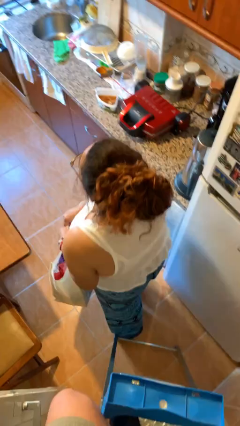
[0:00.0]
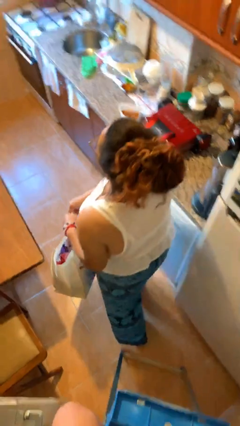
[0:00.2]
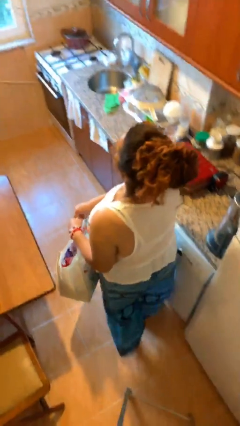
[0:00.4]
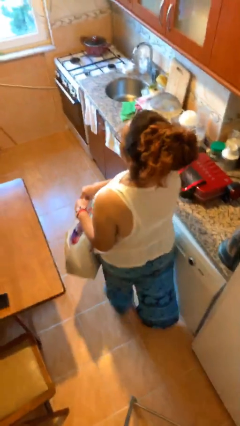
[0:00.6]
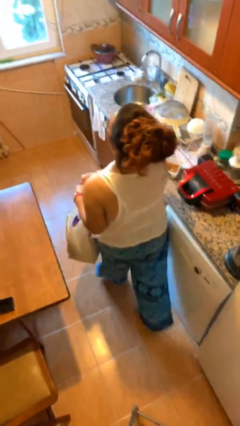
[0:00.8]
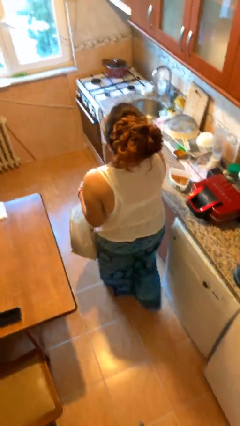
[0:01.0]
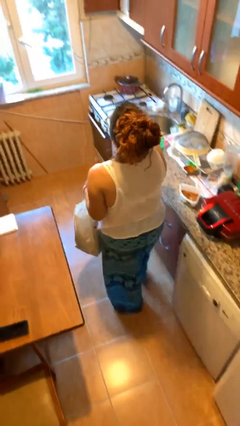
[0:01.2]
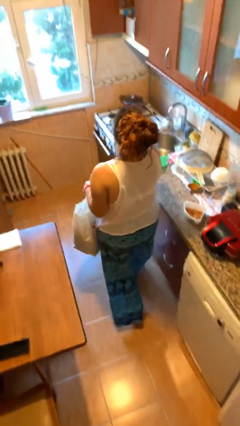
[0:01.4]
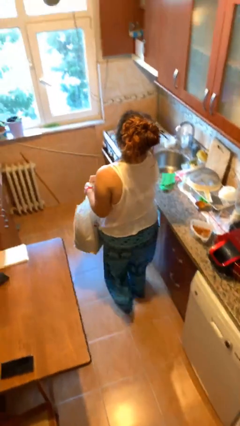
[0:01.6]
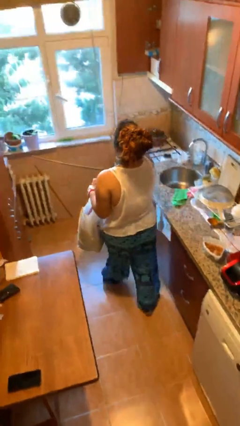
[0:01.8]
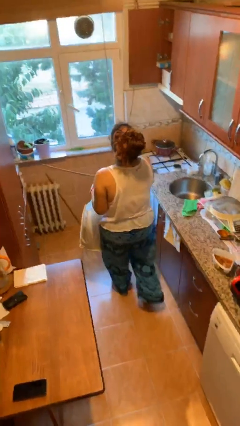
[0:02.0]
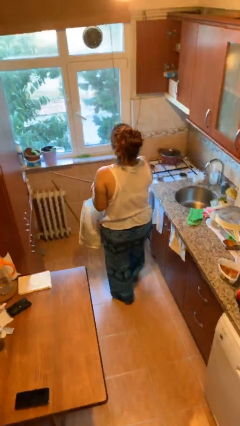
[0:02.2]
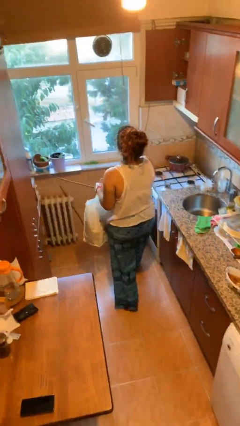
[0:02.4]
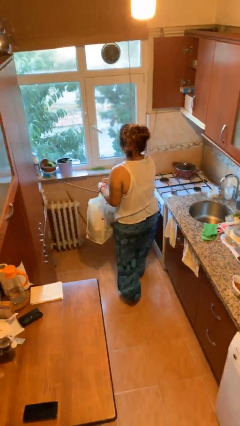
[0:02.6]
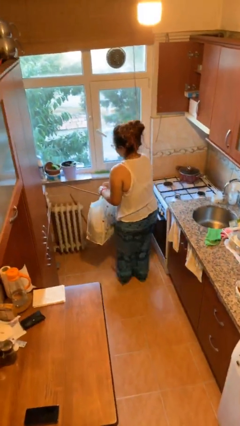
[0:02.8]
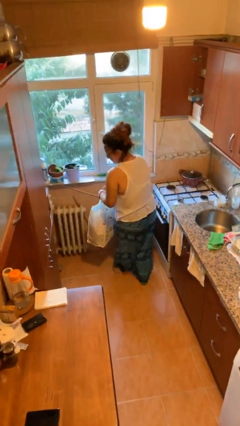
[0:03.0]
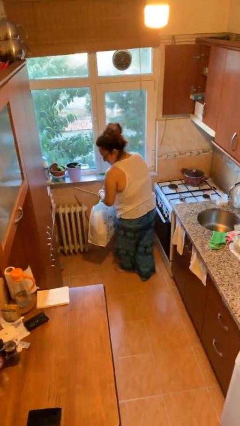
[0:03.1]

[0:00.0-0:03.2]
person carries heavy object

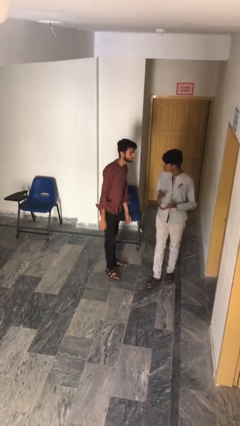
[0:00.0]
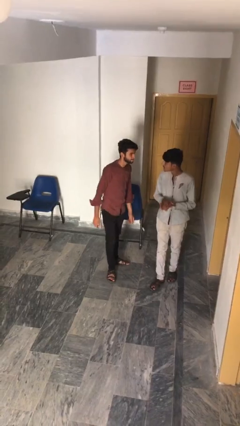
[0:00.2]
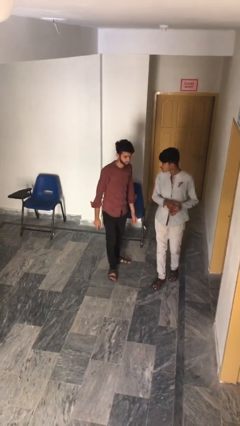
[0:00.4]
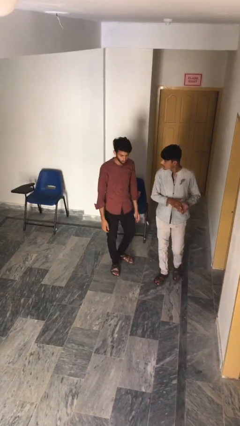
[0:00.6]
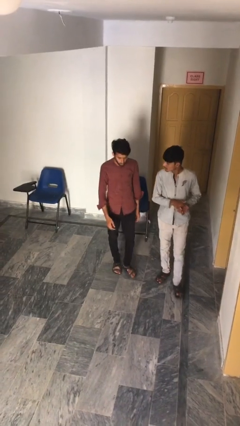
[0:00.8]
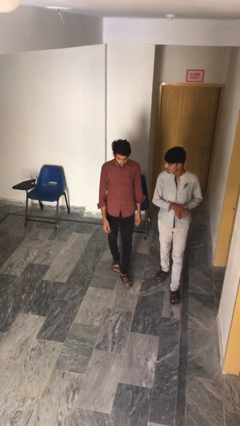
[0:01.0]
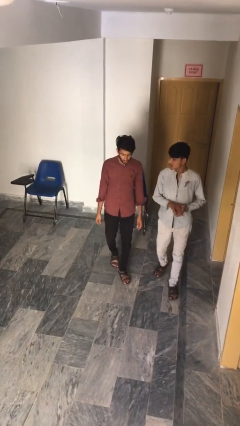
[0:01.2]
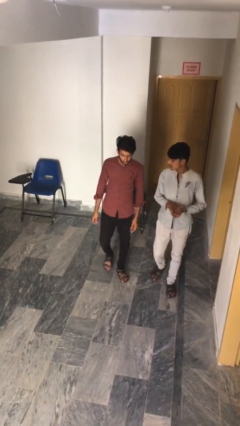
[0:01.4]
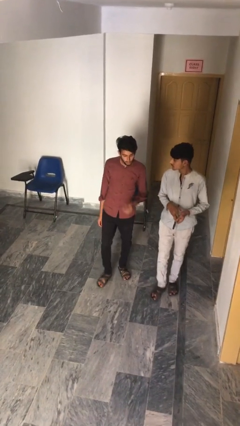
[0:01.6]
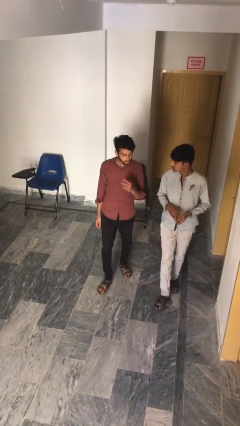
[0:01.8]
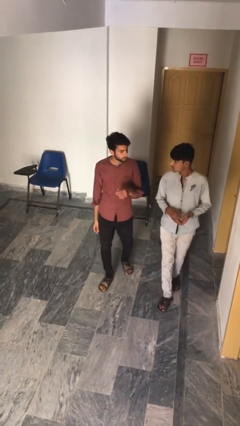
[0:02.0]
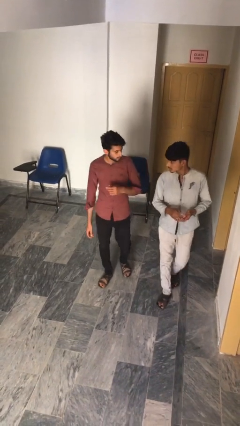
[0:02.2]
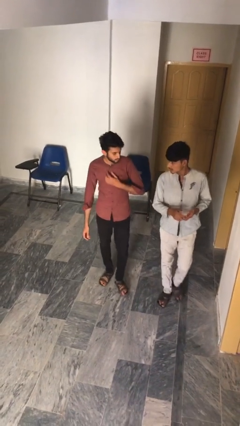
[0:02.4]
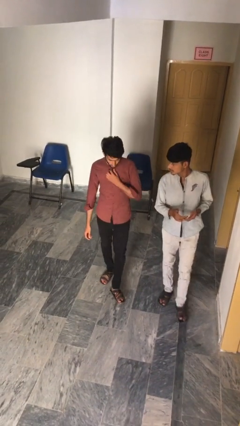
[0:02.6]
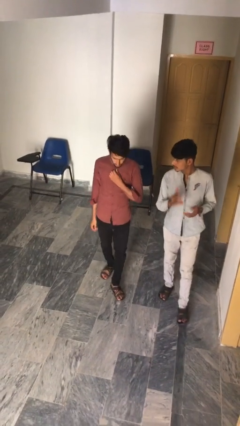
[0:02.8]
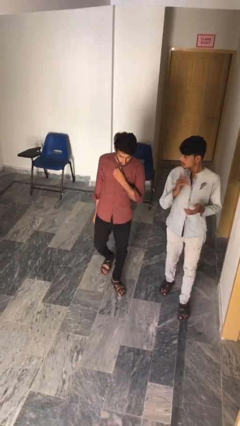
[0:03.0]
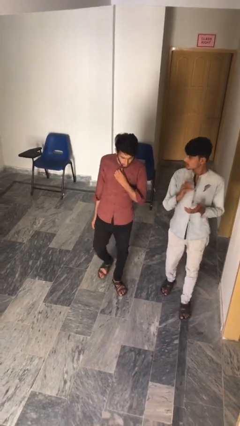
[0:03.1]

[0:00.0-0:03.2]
person talks to person

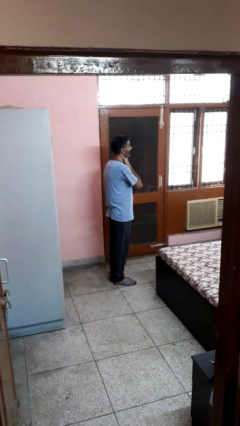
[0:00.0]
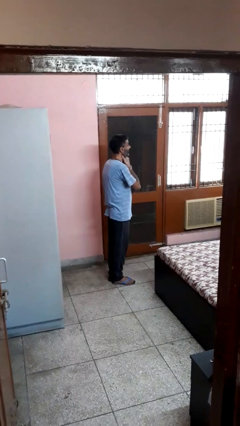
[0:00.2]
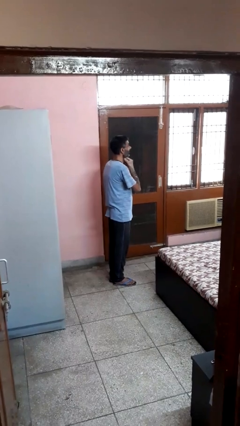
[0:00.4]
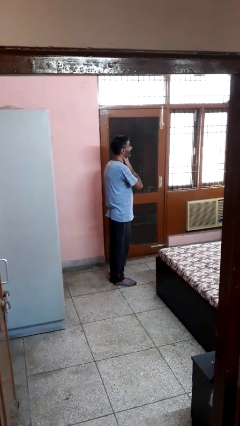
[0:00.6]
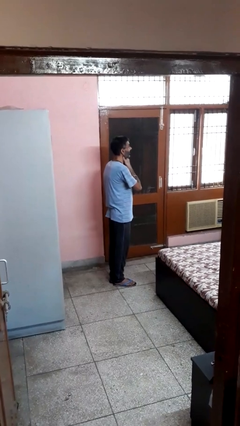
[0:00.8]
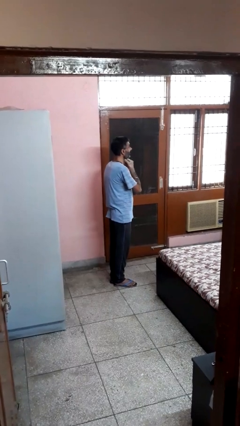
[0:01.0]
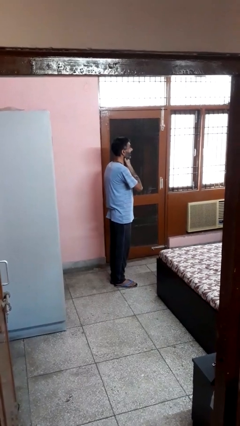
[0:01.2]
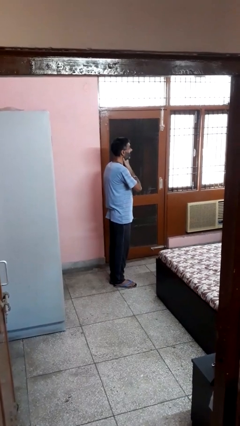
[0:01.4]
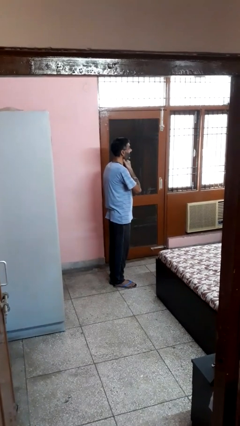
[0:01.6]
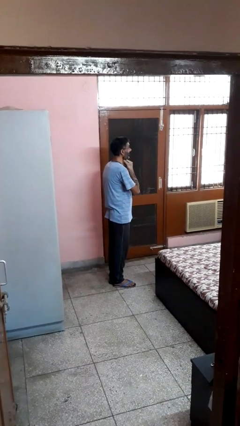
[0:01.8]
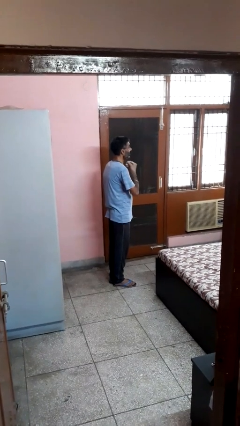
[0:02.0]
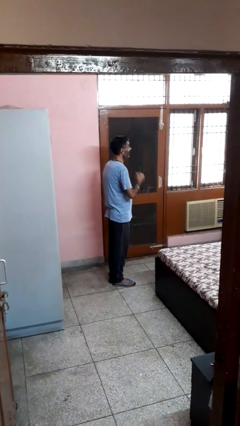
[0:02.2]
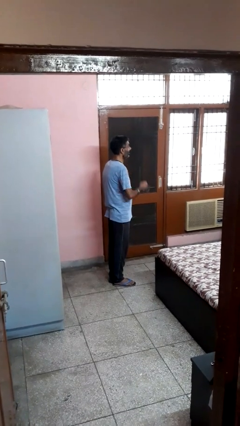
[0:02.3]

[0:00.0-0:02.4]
person rubs neck

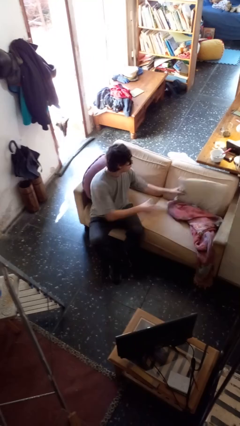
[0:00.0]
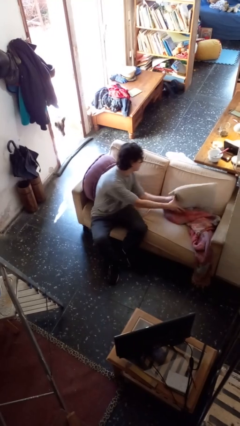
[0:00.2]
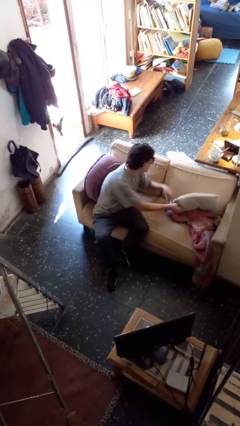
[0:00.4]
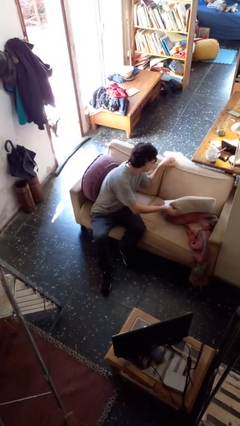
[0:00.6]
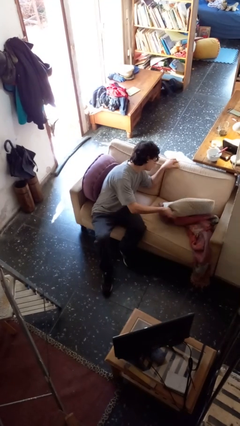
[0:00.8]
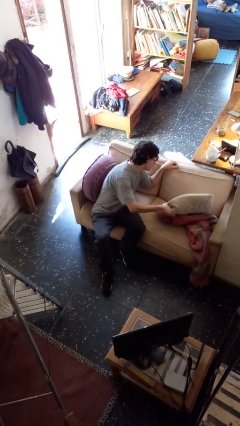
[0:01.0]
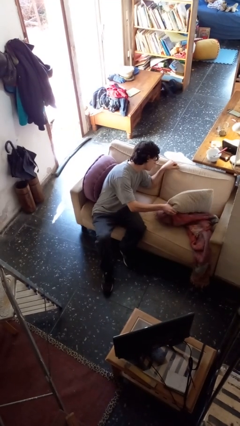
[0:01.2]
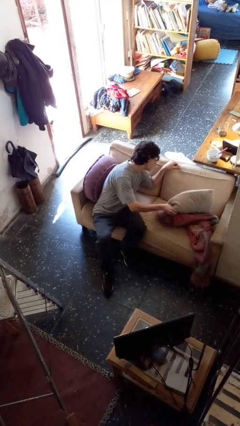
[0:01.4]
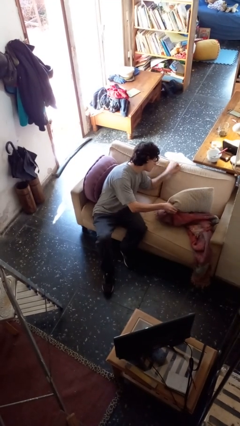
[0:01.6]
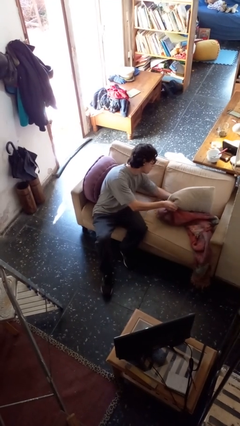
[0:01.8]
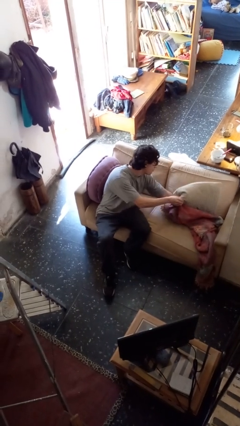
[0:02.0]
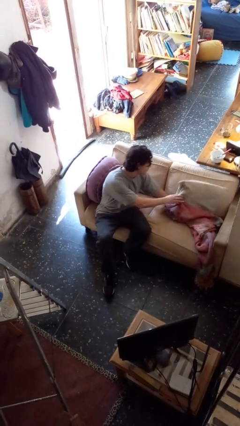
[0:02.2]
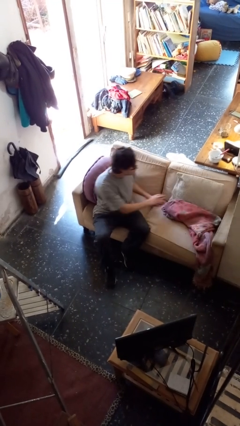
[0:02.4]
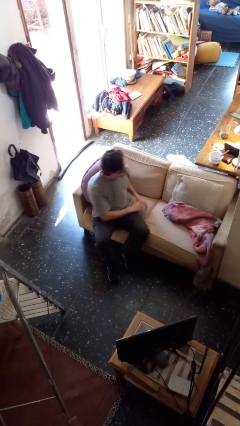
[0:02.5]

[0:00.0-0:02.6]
person searches in couch

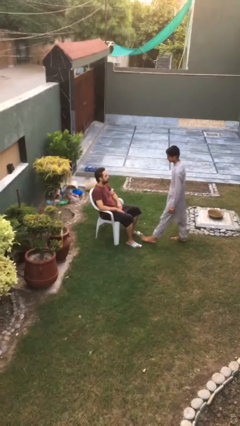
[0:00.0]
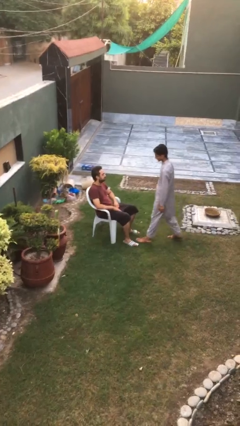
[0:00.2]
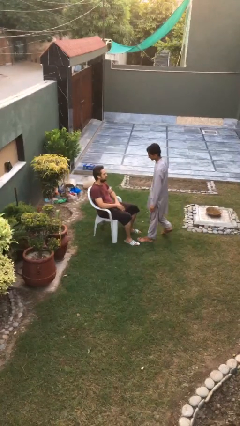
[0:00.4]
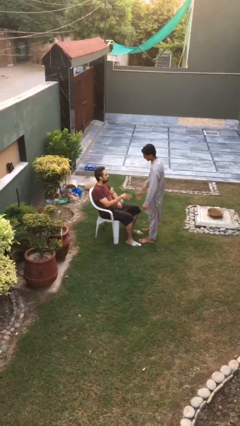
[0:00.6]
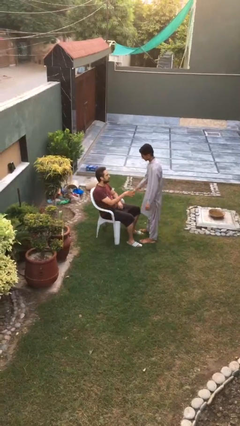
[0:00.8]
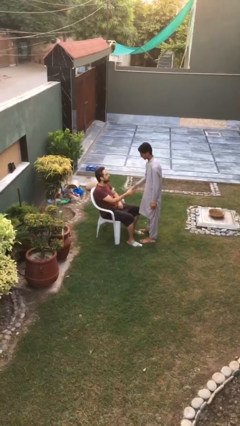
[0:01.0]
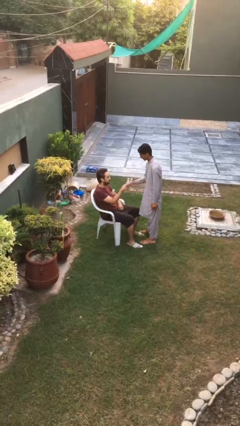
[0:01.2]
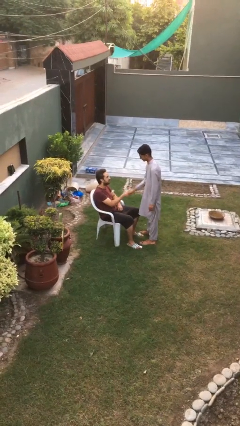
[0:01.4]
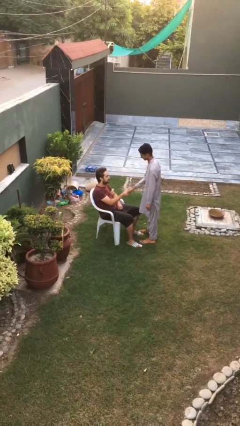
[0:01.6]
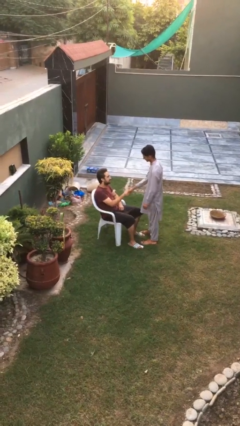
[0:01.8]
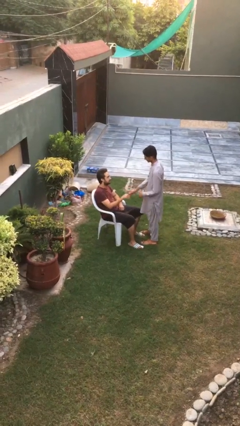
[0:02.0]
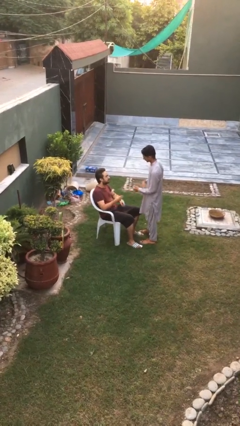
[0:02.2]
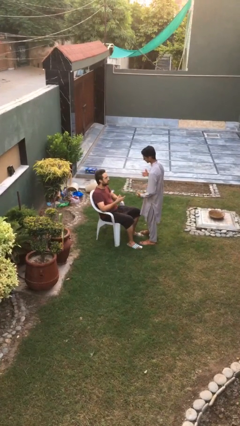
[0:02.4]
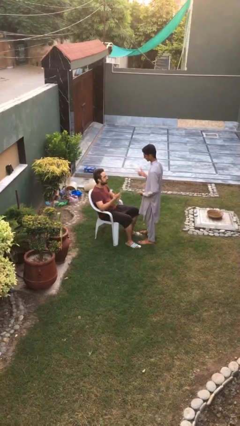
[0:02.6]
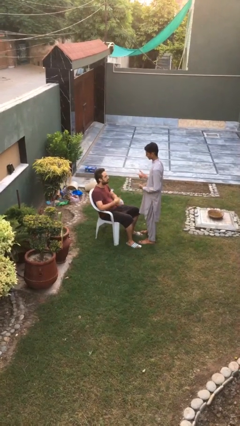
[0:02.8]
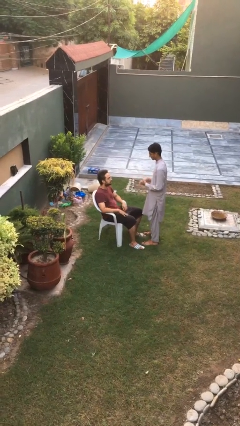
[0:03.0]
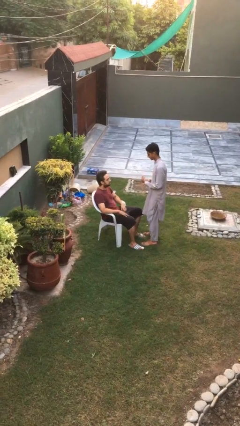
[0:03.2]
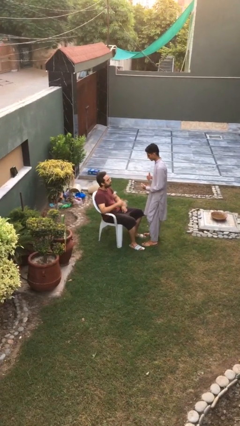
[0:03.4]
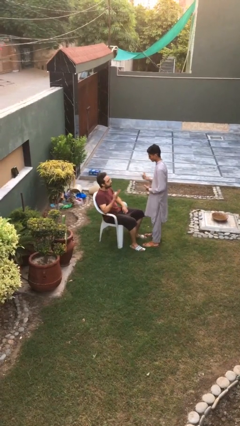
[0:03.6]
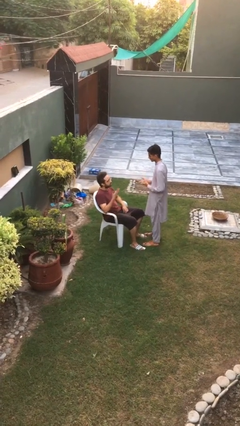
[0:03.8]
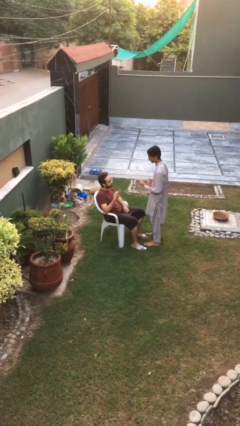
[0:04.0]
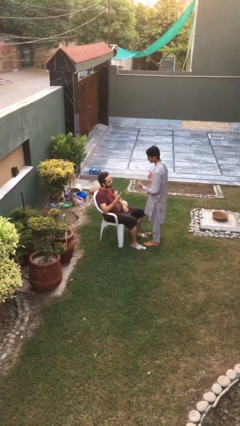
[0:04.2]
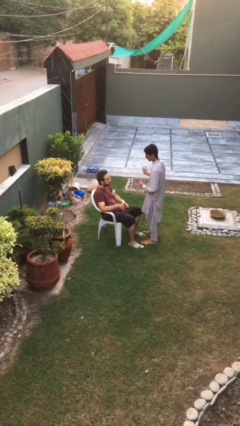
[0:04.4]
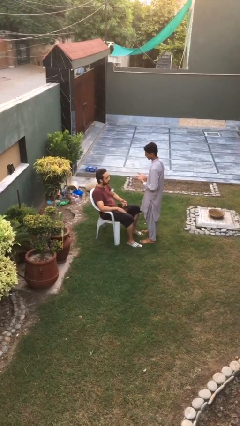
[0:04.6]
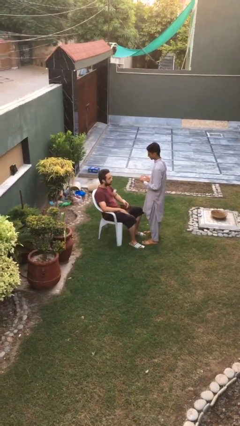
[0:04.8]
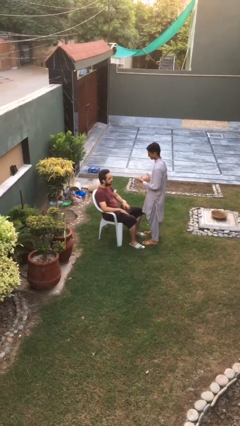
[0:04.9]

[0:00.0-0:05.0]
person shakes hand

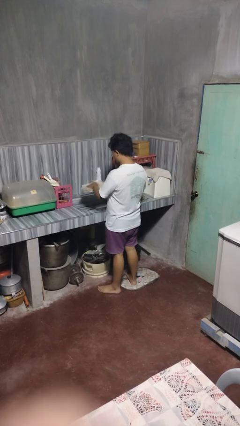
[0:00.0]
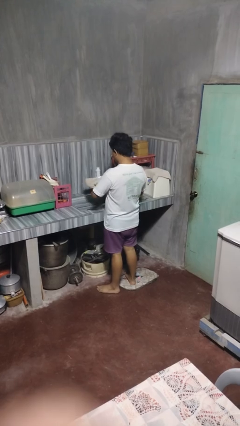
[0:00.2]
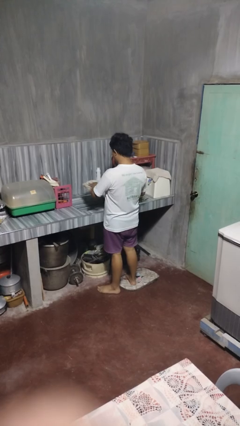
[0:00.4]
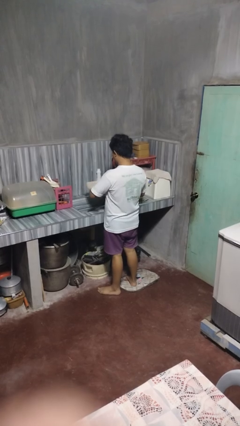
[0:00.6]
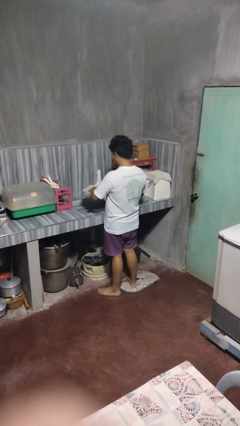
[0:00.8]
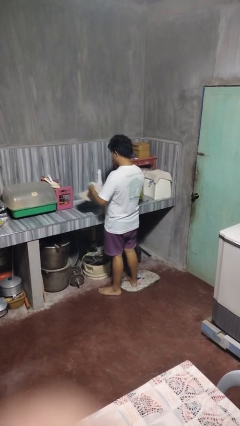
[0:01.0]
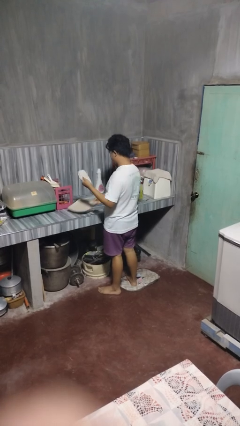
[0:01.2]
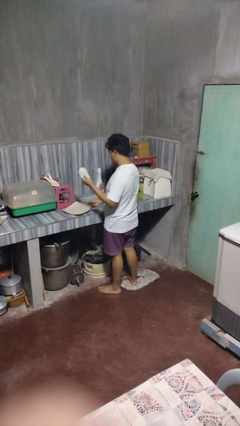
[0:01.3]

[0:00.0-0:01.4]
person dries dish
